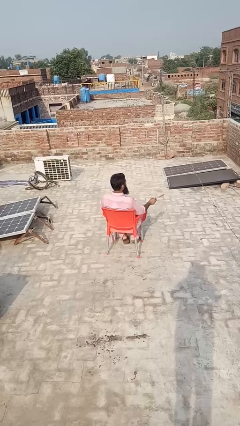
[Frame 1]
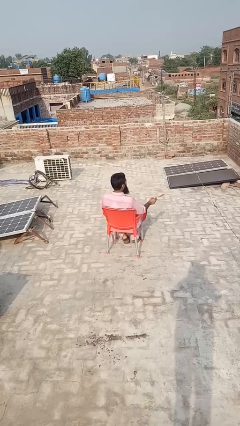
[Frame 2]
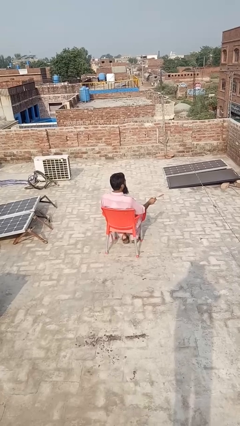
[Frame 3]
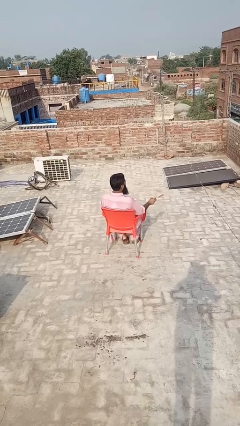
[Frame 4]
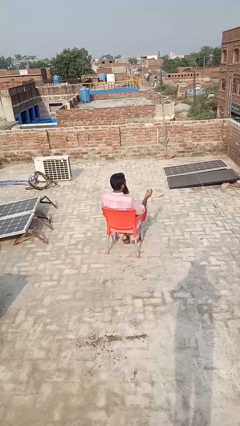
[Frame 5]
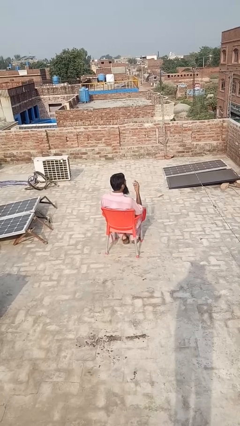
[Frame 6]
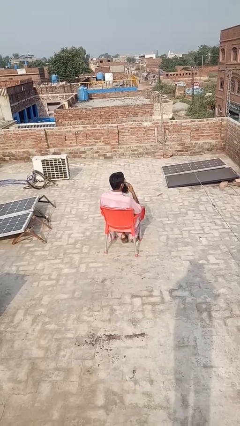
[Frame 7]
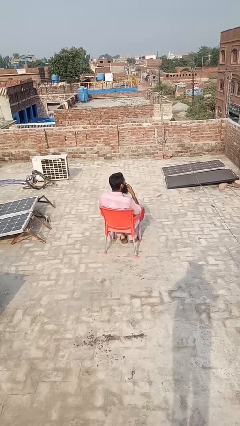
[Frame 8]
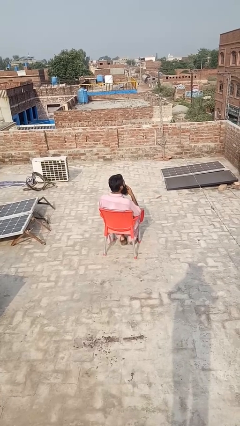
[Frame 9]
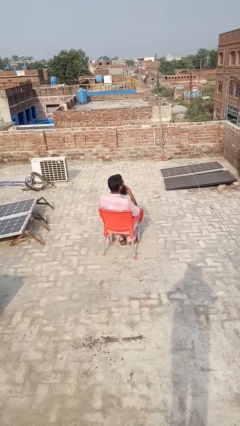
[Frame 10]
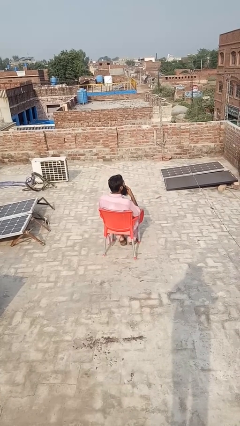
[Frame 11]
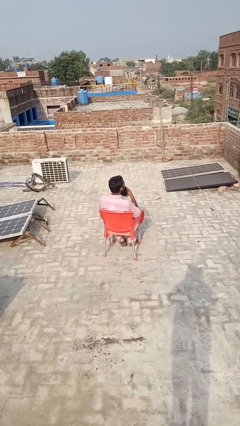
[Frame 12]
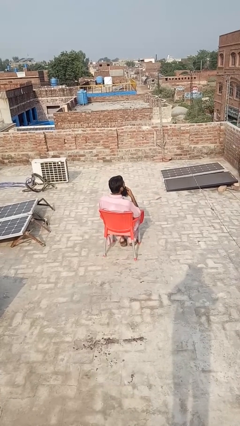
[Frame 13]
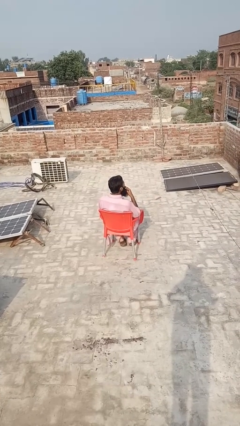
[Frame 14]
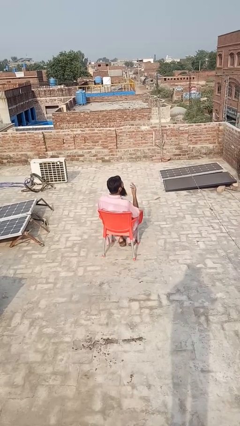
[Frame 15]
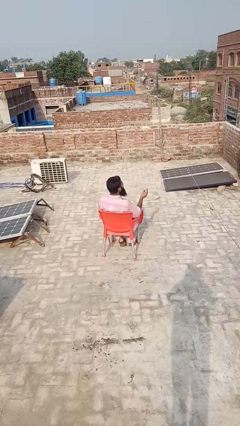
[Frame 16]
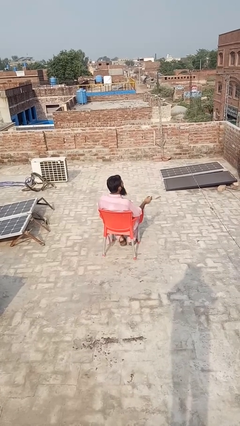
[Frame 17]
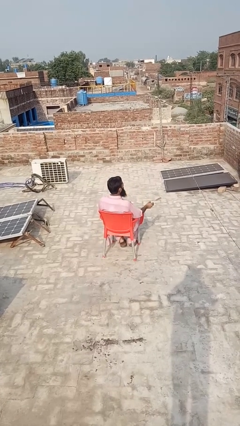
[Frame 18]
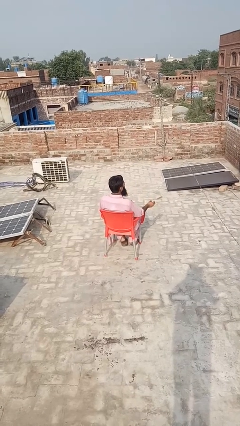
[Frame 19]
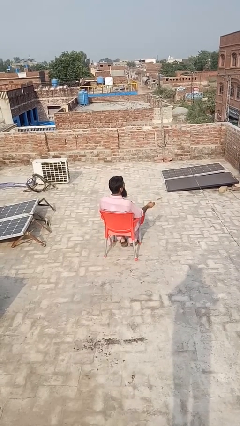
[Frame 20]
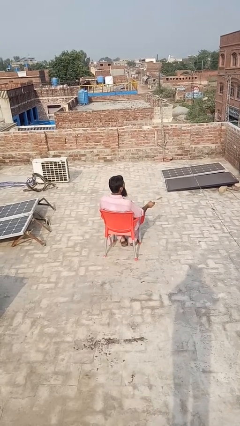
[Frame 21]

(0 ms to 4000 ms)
person vapes

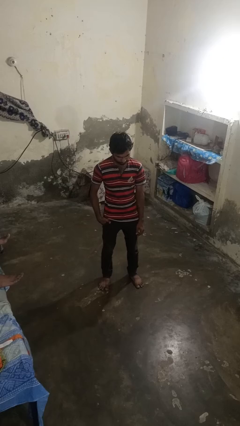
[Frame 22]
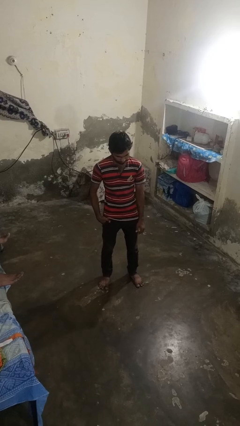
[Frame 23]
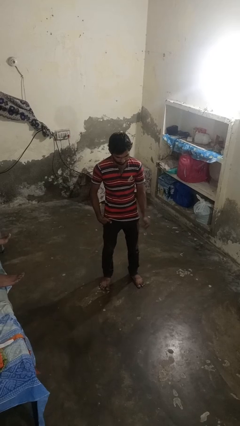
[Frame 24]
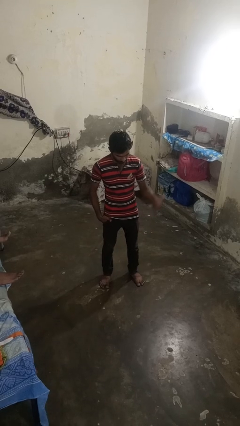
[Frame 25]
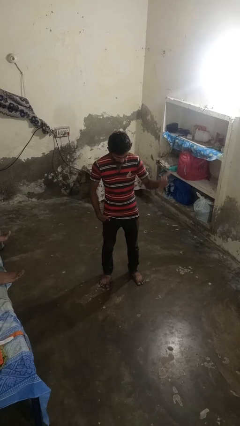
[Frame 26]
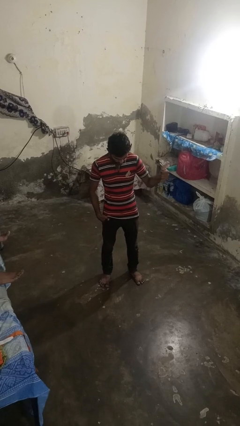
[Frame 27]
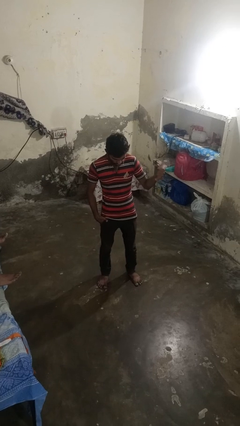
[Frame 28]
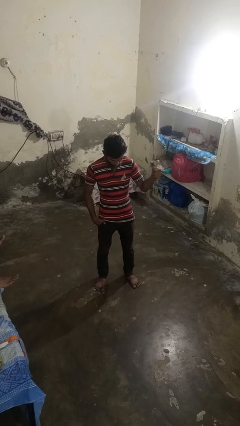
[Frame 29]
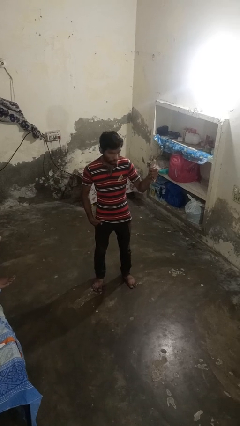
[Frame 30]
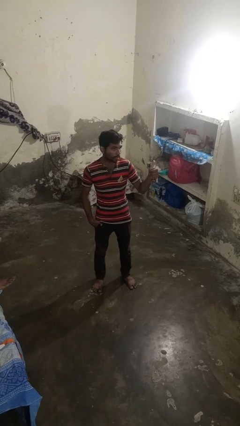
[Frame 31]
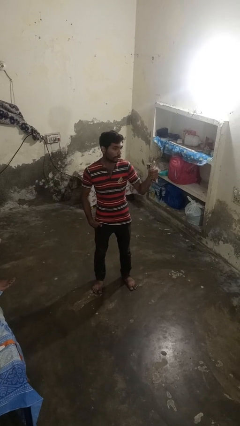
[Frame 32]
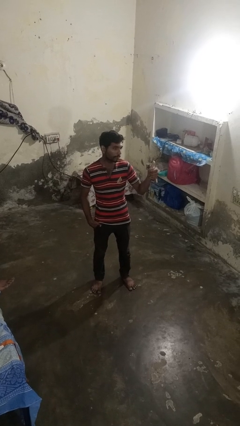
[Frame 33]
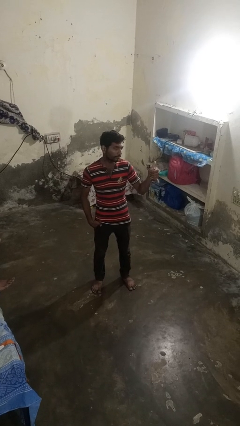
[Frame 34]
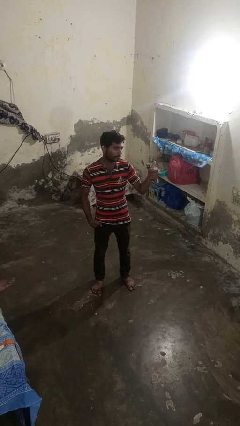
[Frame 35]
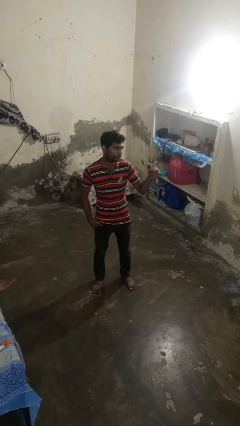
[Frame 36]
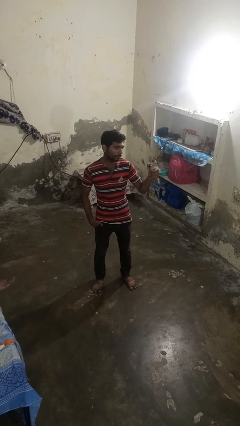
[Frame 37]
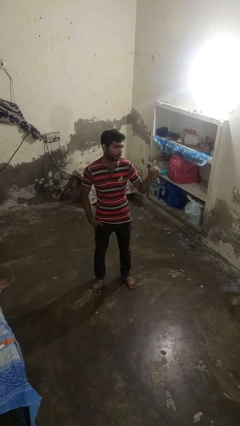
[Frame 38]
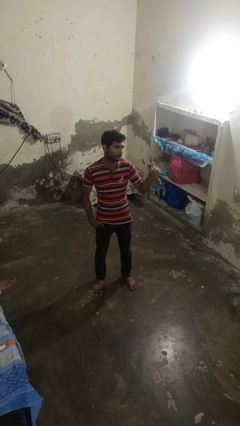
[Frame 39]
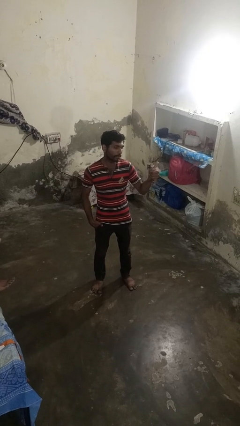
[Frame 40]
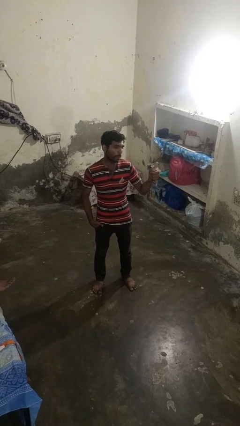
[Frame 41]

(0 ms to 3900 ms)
person gestures hang loose

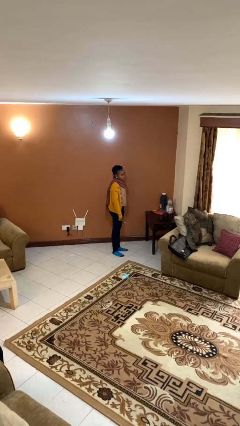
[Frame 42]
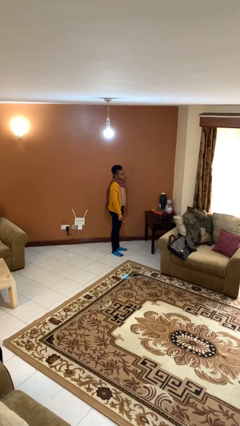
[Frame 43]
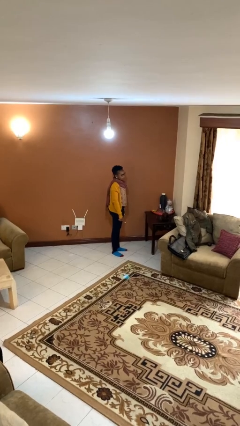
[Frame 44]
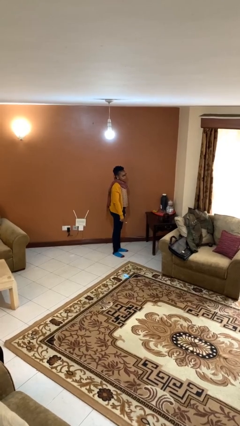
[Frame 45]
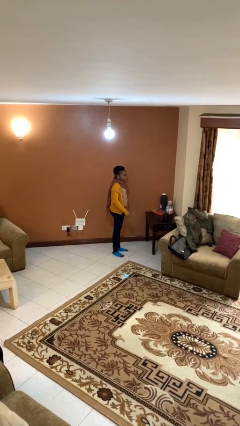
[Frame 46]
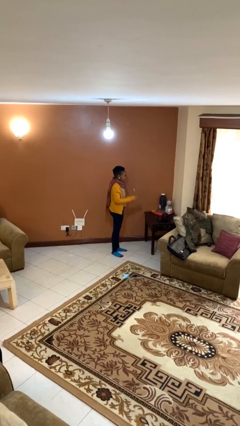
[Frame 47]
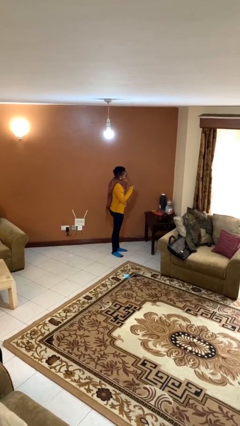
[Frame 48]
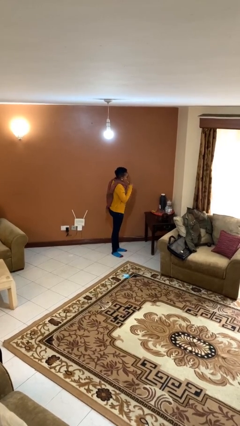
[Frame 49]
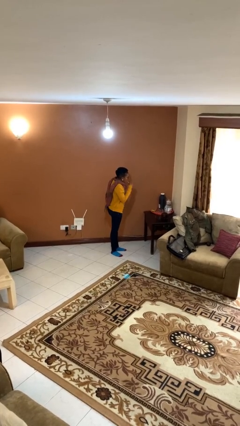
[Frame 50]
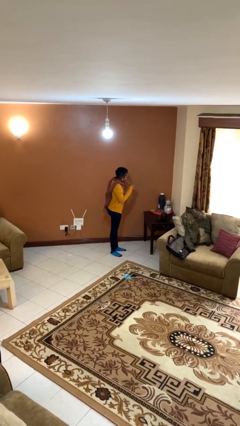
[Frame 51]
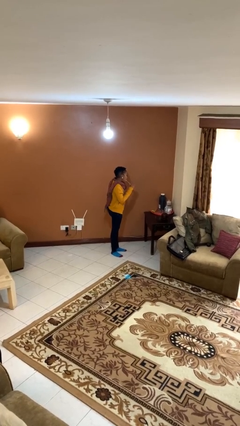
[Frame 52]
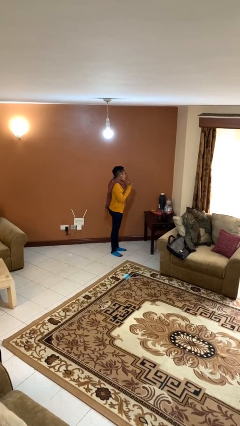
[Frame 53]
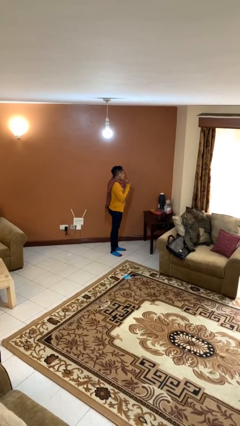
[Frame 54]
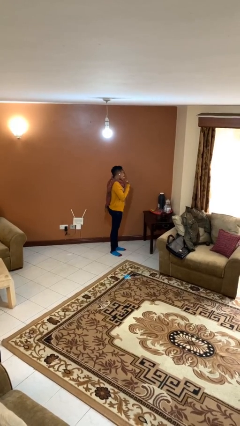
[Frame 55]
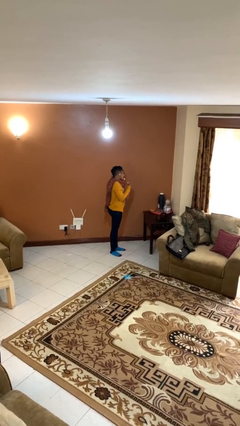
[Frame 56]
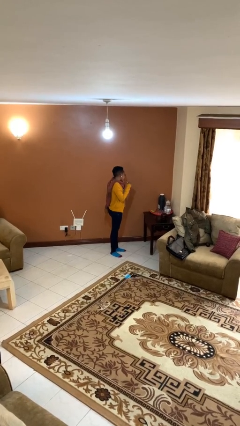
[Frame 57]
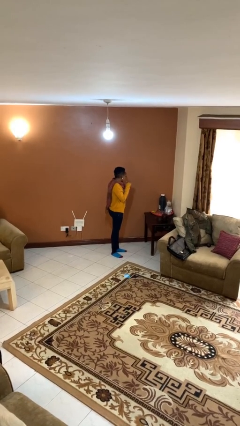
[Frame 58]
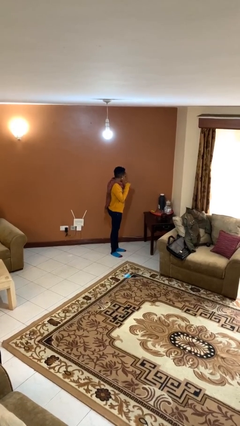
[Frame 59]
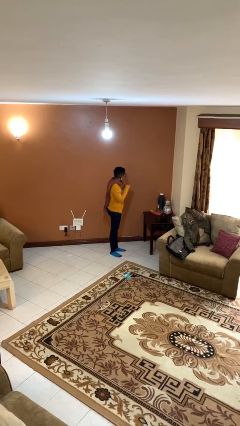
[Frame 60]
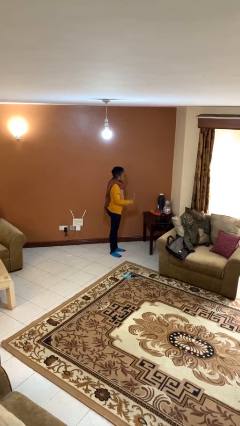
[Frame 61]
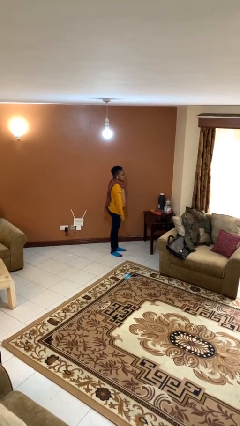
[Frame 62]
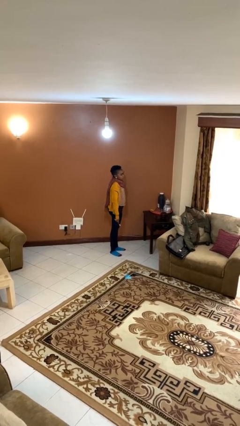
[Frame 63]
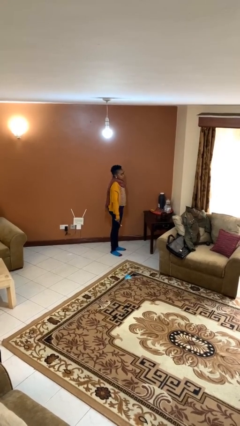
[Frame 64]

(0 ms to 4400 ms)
person brushes teeth

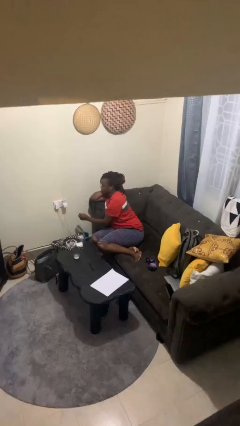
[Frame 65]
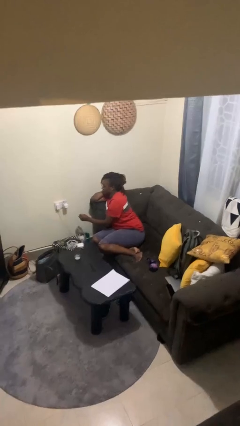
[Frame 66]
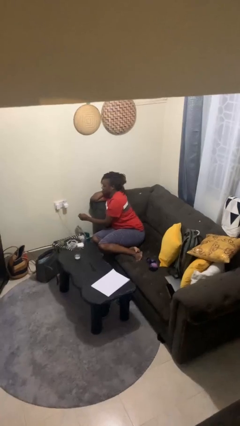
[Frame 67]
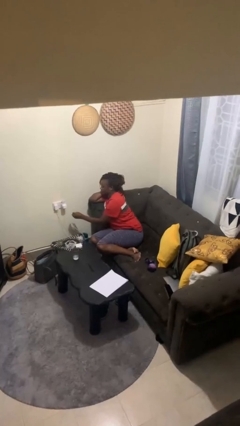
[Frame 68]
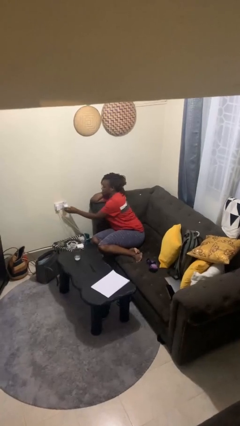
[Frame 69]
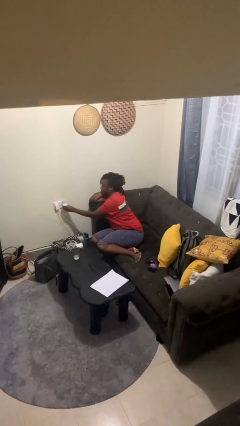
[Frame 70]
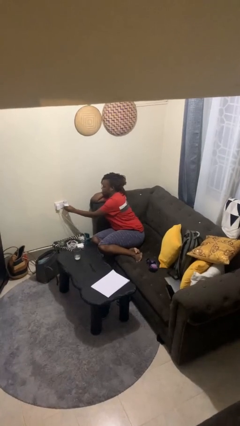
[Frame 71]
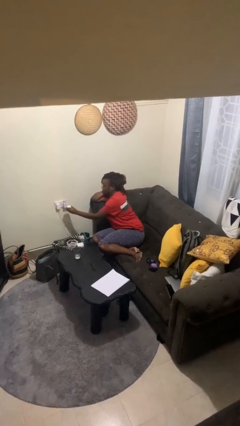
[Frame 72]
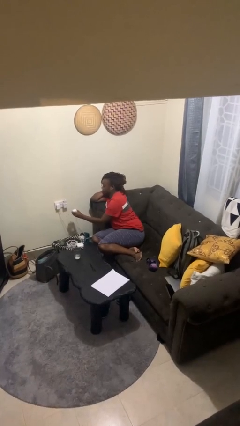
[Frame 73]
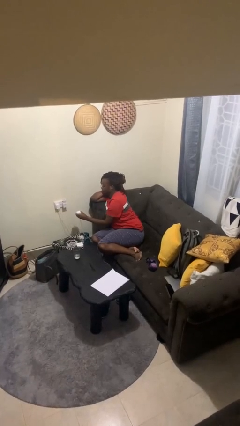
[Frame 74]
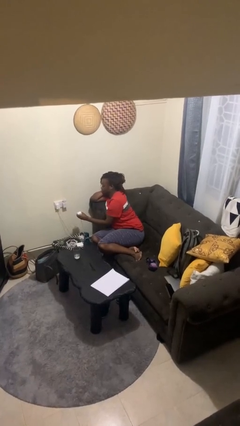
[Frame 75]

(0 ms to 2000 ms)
person unplugs from electrical socket

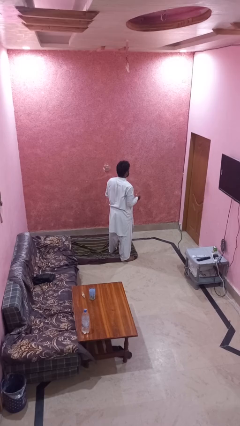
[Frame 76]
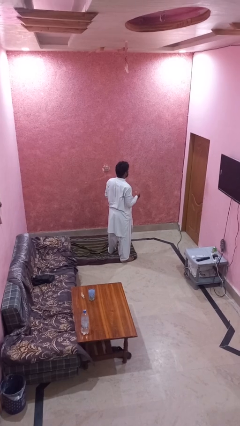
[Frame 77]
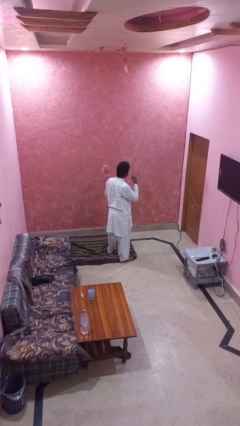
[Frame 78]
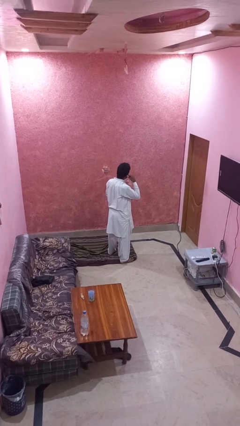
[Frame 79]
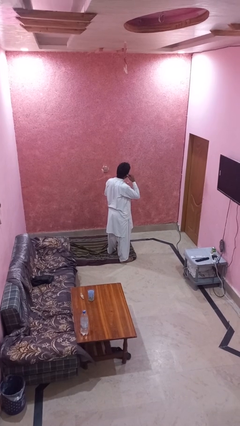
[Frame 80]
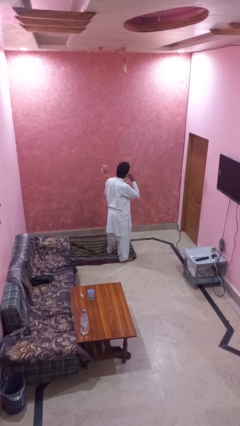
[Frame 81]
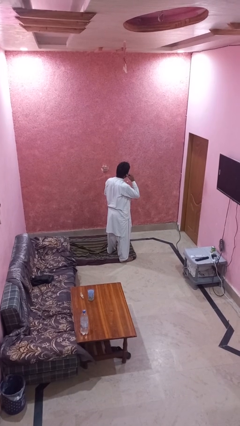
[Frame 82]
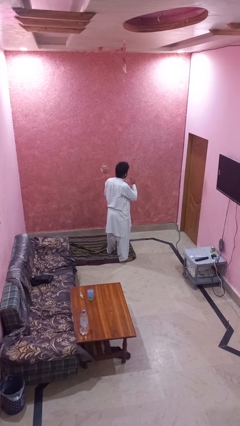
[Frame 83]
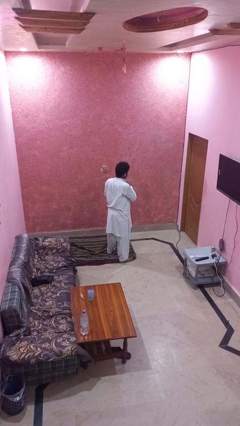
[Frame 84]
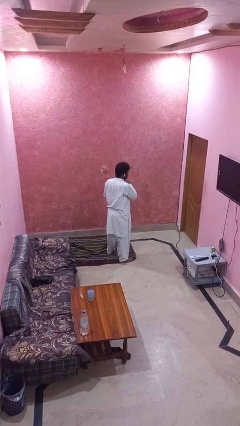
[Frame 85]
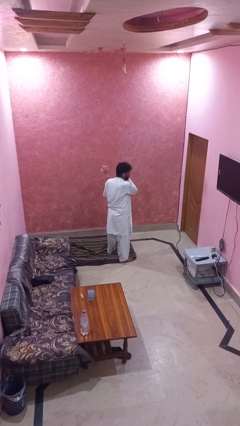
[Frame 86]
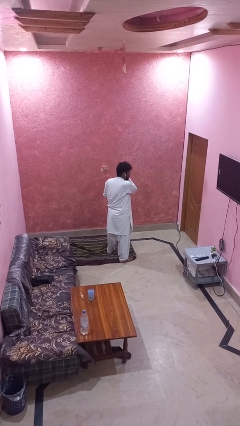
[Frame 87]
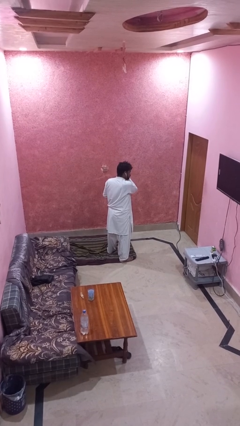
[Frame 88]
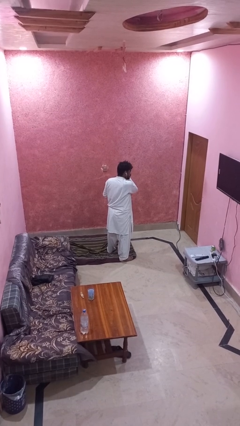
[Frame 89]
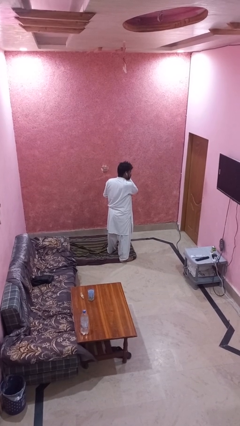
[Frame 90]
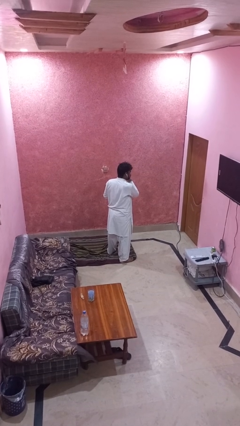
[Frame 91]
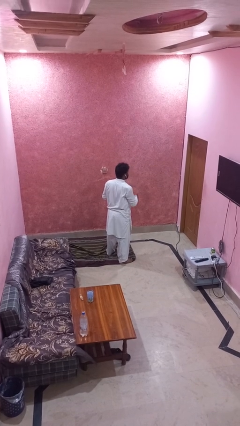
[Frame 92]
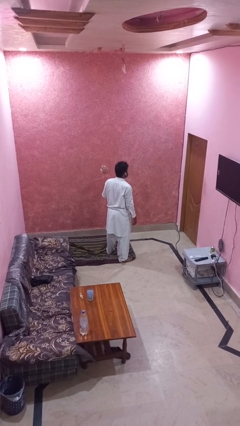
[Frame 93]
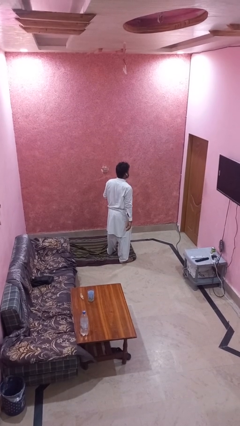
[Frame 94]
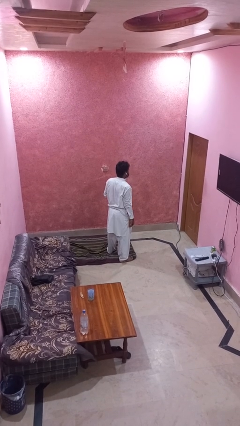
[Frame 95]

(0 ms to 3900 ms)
person puts on headphones
